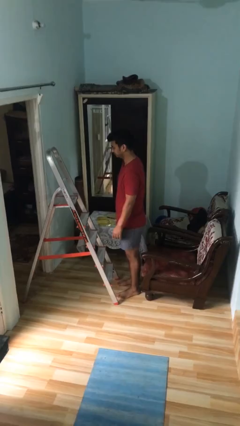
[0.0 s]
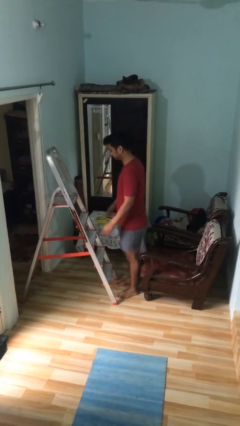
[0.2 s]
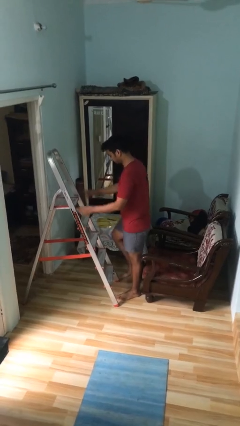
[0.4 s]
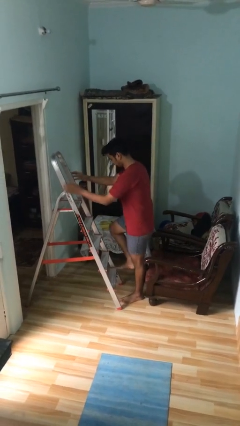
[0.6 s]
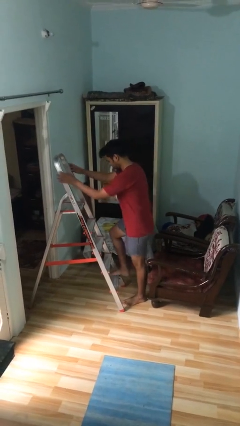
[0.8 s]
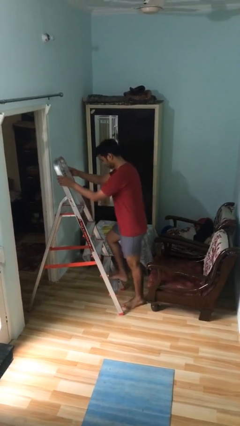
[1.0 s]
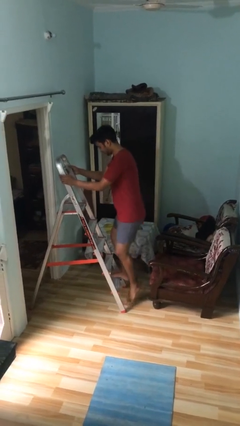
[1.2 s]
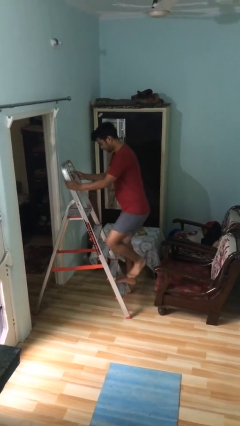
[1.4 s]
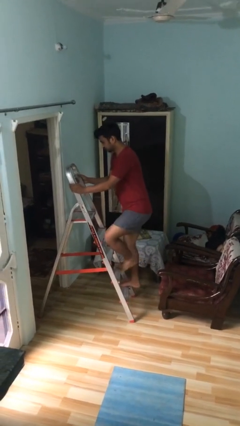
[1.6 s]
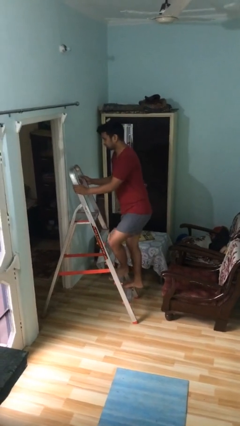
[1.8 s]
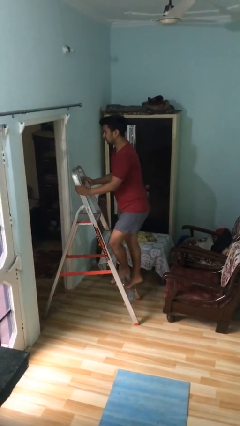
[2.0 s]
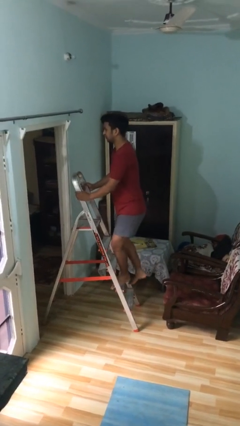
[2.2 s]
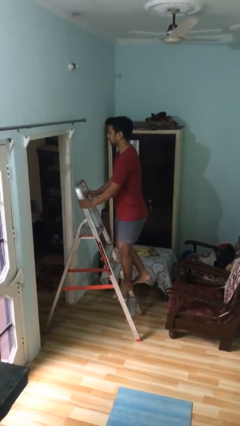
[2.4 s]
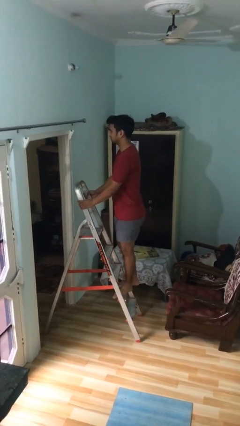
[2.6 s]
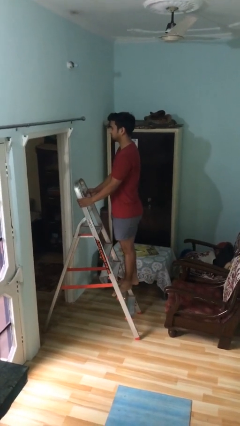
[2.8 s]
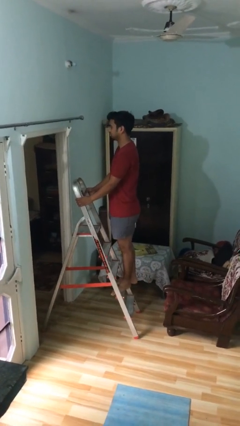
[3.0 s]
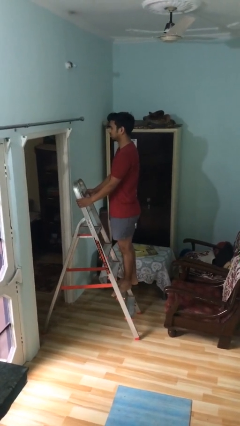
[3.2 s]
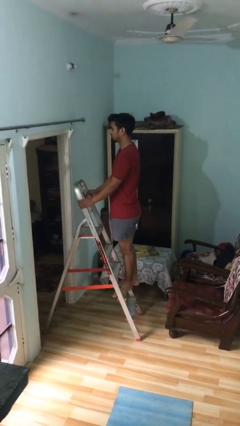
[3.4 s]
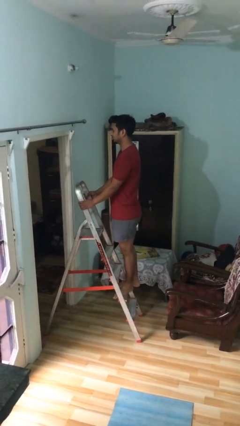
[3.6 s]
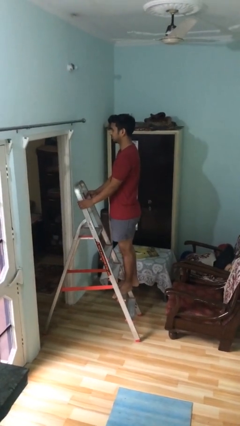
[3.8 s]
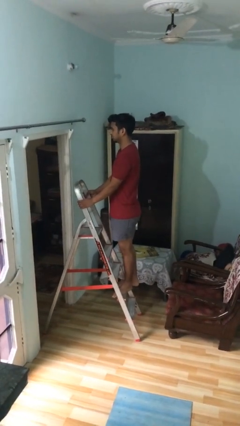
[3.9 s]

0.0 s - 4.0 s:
person climbs up ladder

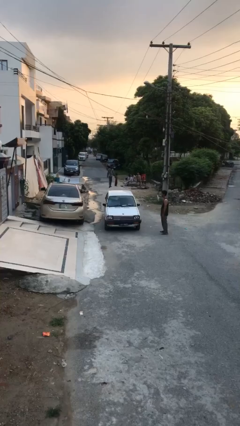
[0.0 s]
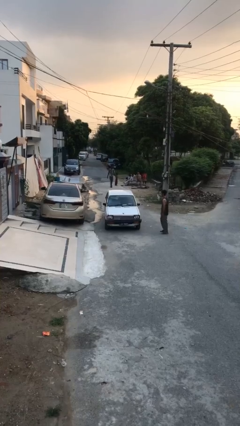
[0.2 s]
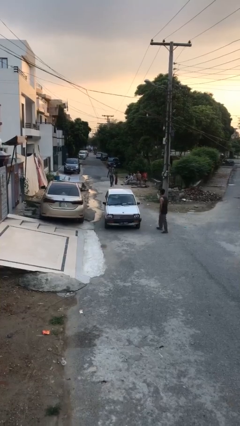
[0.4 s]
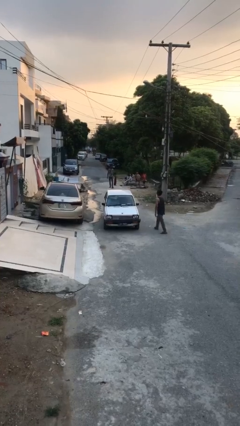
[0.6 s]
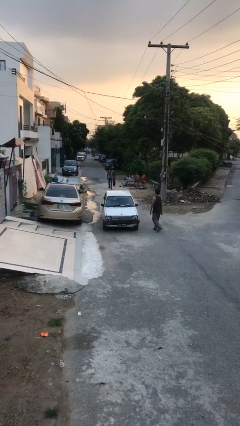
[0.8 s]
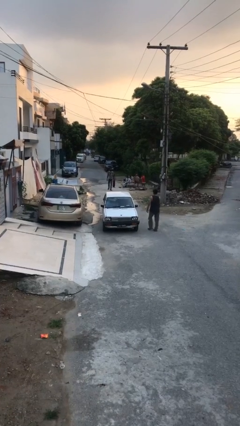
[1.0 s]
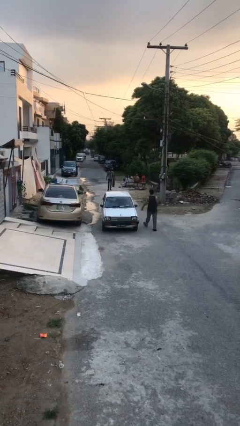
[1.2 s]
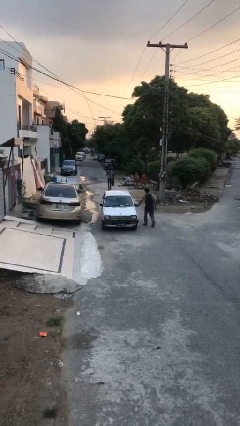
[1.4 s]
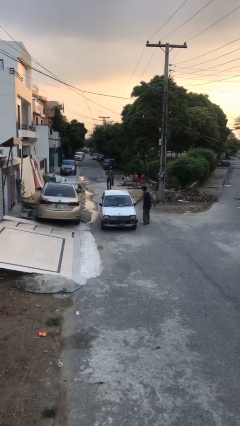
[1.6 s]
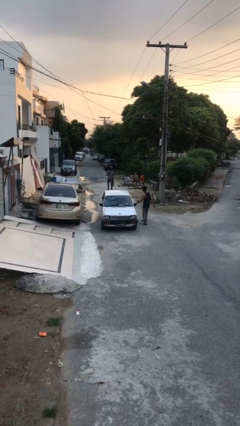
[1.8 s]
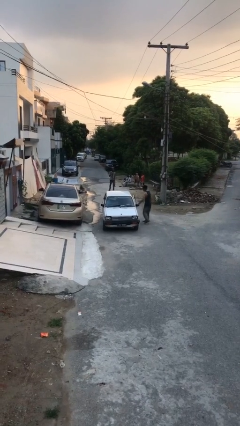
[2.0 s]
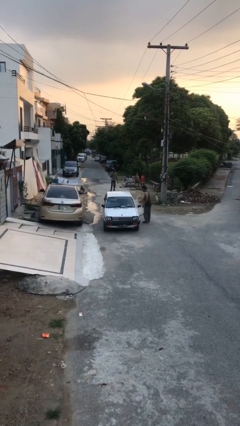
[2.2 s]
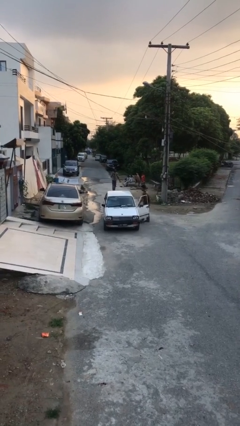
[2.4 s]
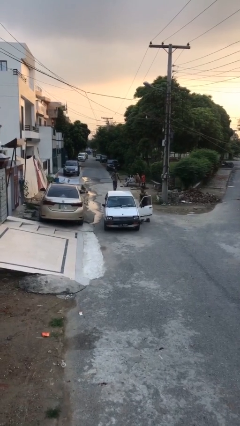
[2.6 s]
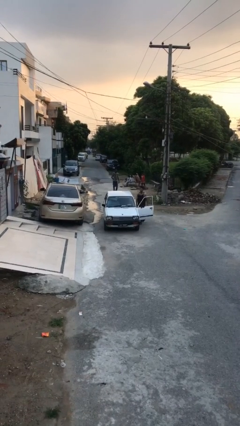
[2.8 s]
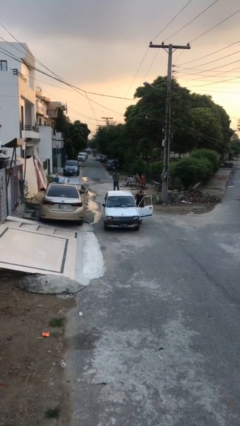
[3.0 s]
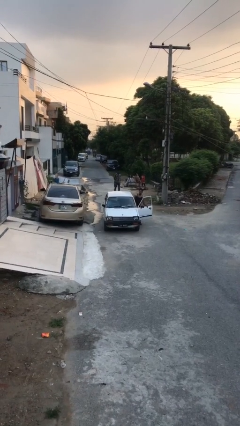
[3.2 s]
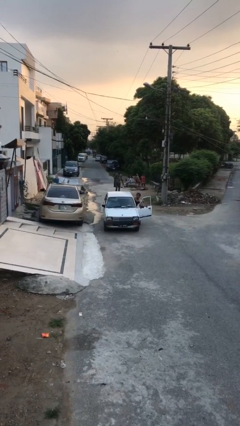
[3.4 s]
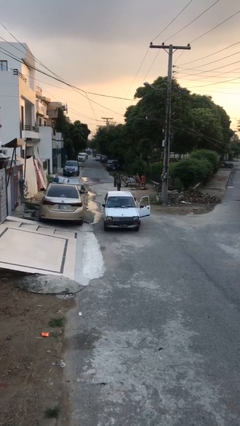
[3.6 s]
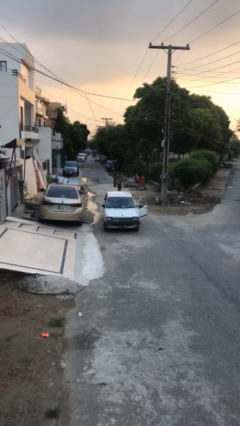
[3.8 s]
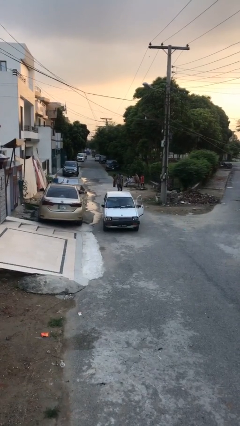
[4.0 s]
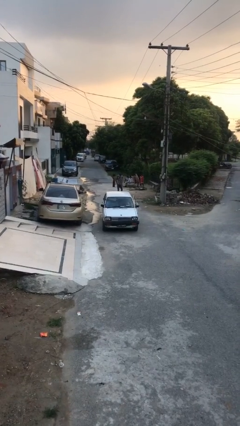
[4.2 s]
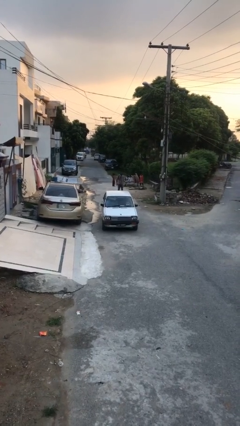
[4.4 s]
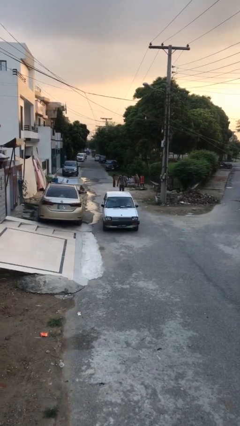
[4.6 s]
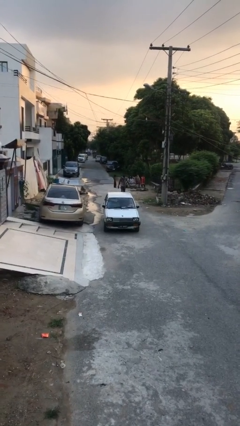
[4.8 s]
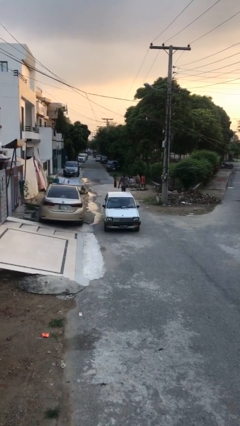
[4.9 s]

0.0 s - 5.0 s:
car picks up person

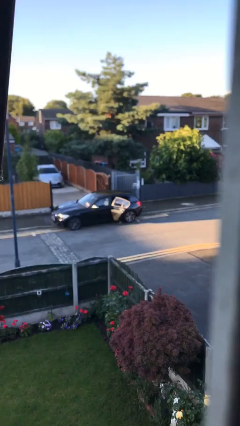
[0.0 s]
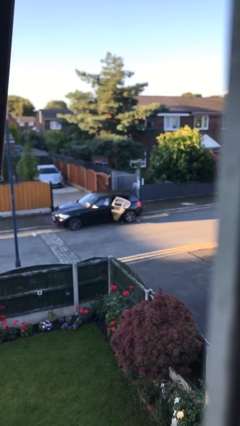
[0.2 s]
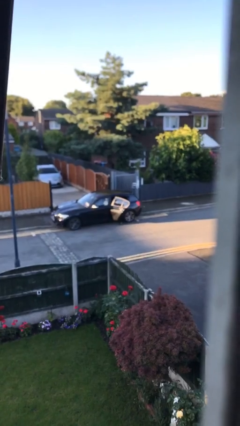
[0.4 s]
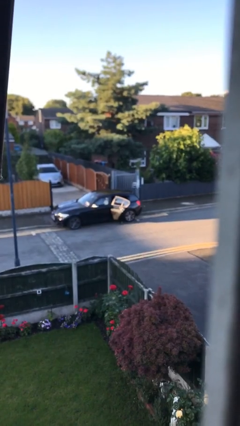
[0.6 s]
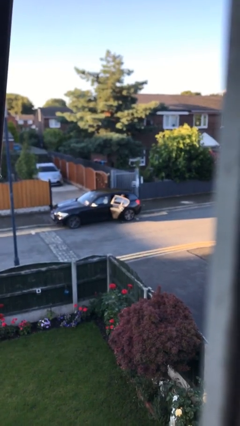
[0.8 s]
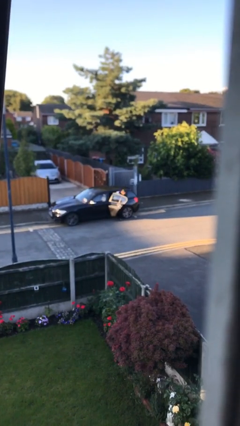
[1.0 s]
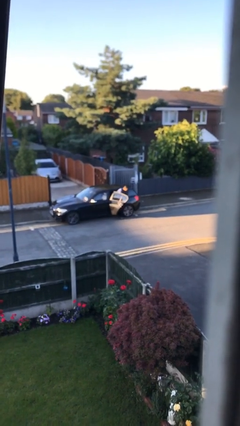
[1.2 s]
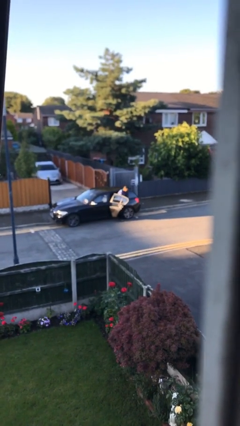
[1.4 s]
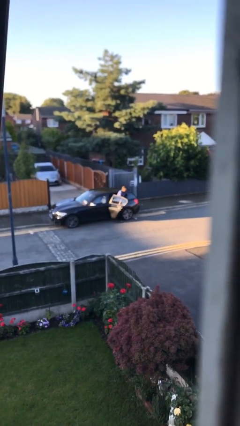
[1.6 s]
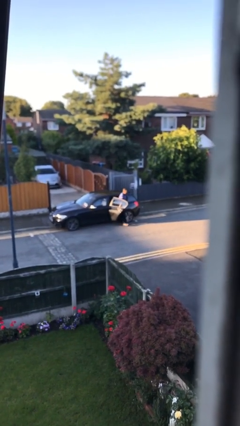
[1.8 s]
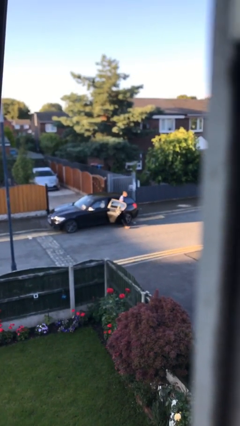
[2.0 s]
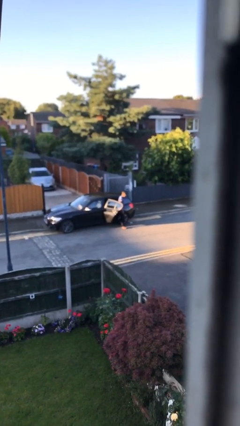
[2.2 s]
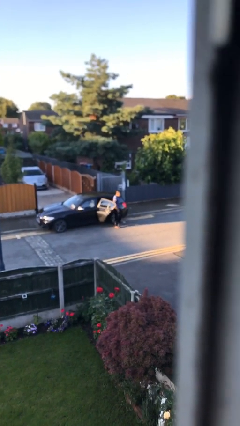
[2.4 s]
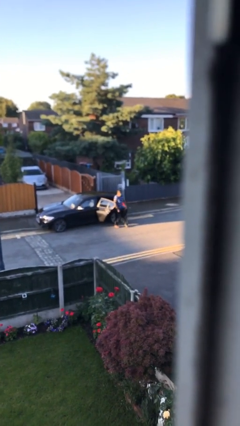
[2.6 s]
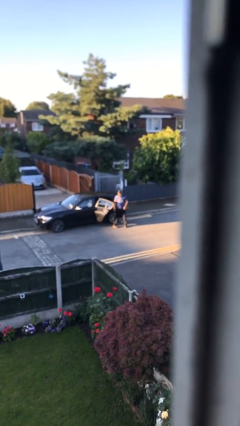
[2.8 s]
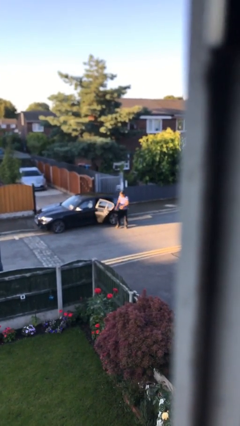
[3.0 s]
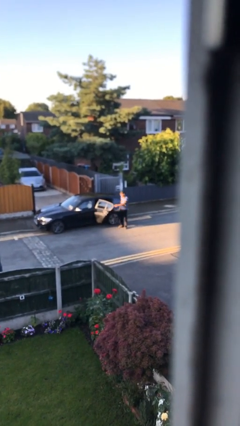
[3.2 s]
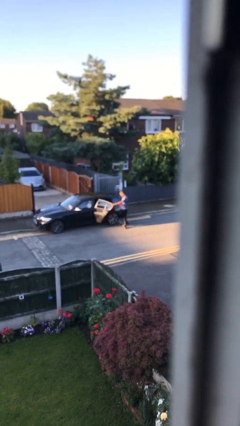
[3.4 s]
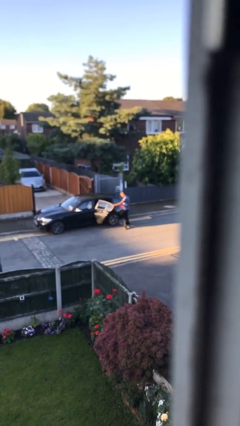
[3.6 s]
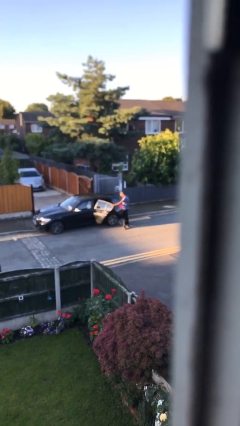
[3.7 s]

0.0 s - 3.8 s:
person exits car

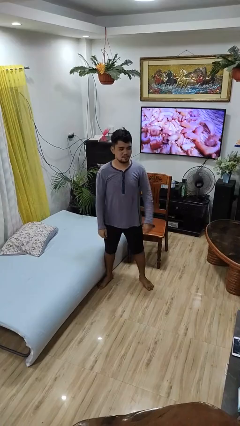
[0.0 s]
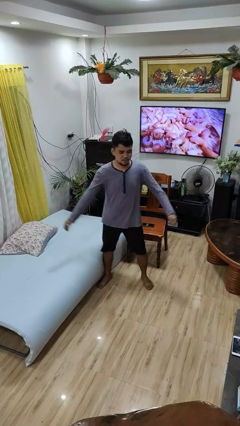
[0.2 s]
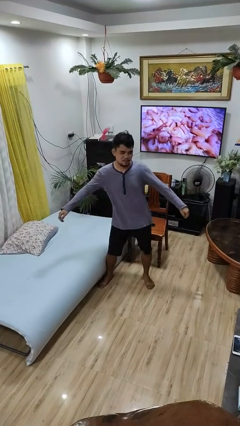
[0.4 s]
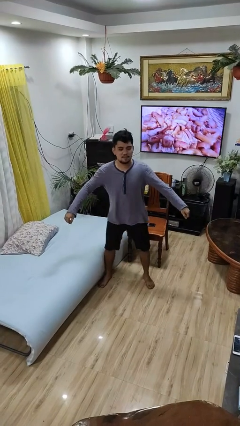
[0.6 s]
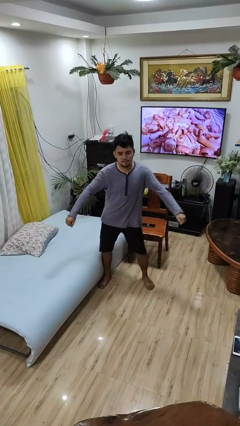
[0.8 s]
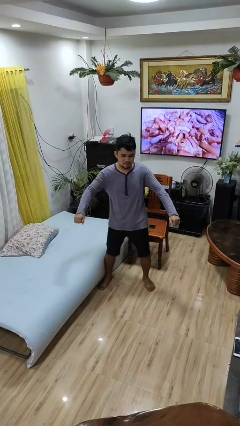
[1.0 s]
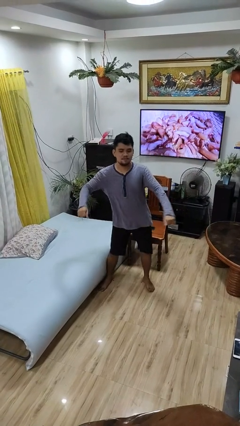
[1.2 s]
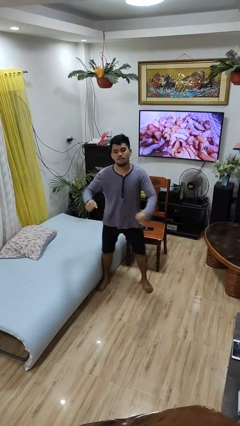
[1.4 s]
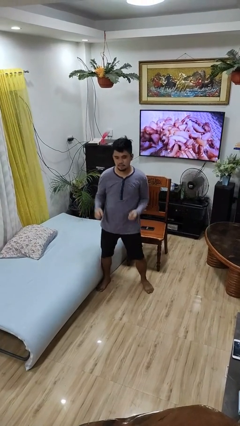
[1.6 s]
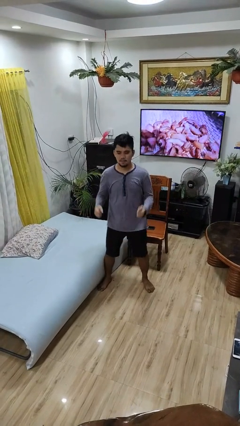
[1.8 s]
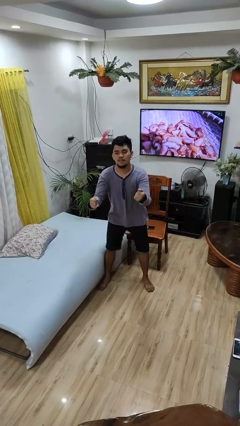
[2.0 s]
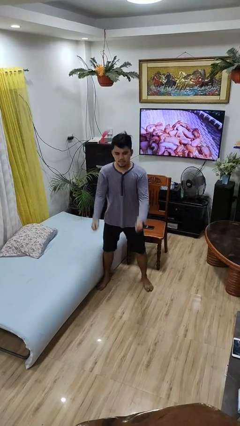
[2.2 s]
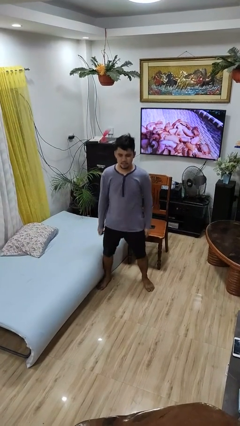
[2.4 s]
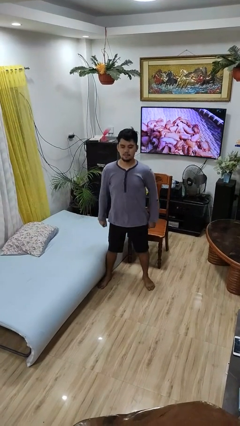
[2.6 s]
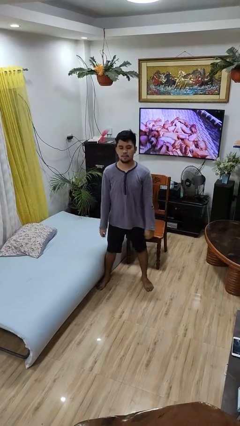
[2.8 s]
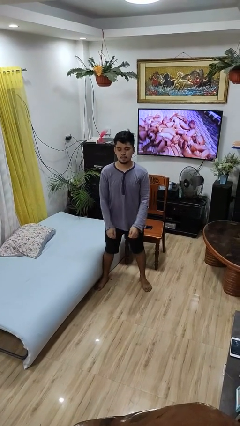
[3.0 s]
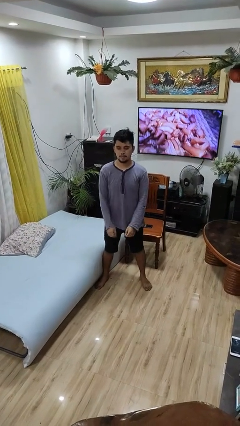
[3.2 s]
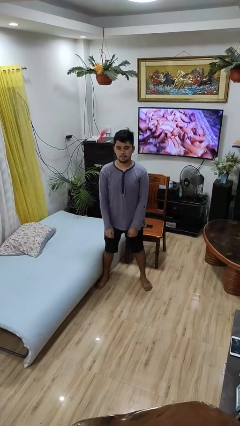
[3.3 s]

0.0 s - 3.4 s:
person dances in place

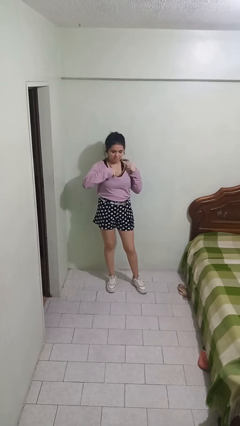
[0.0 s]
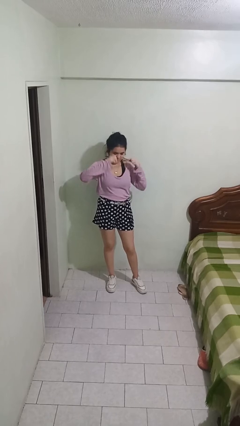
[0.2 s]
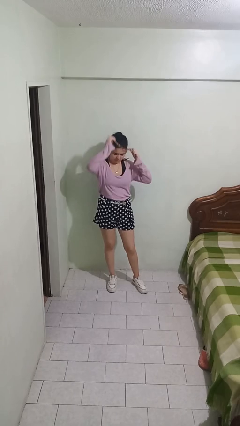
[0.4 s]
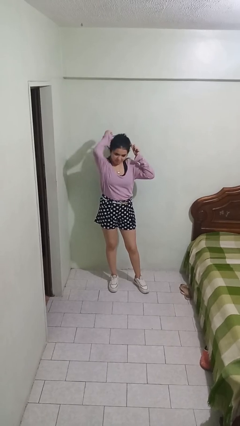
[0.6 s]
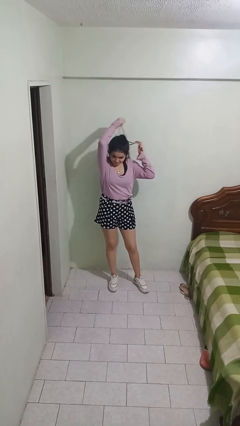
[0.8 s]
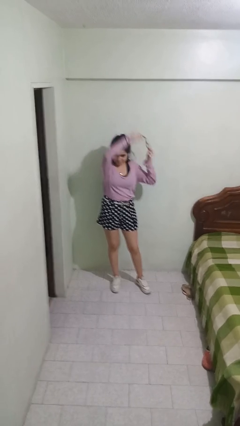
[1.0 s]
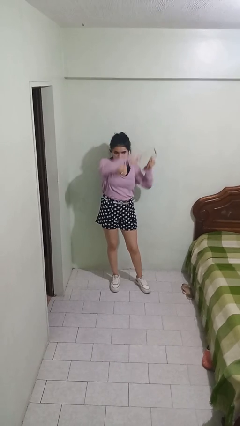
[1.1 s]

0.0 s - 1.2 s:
person takes off necklace
